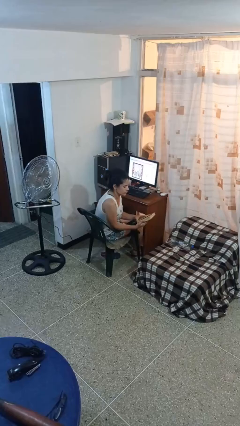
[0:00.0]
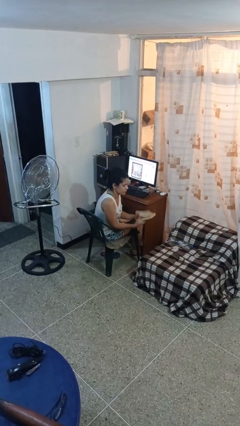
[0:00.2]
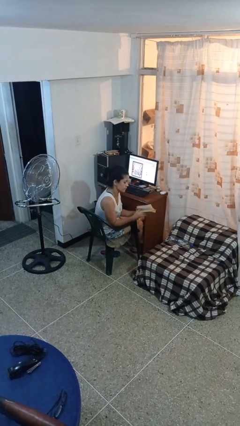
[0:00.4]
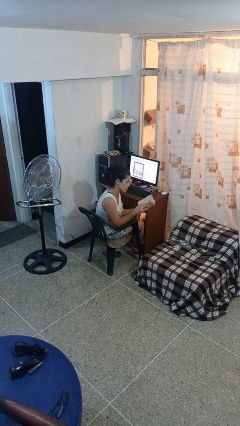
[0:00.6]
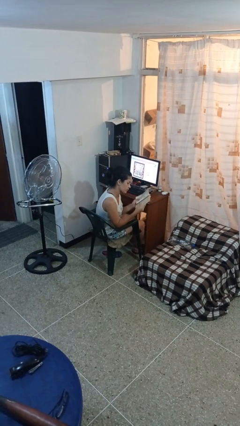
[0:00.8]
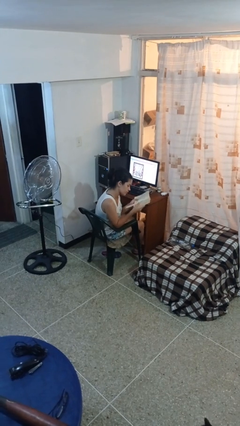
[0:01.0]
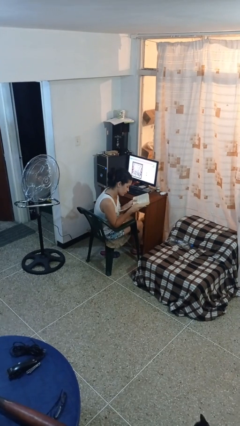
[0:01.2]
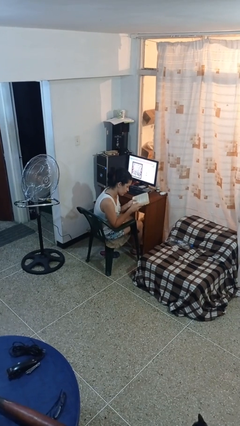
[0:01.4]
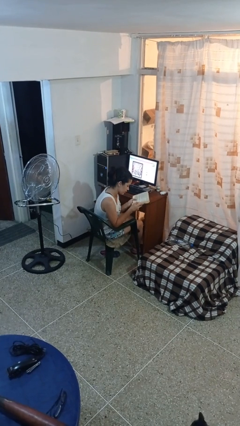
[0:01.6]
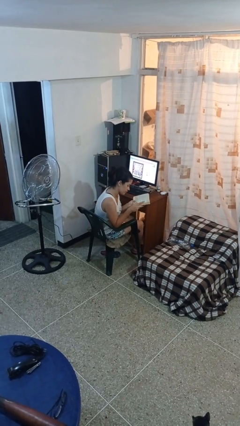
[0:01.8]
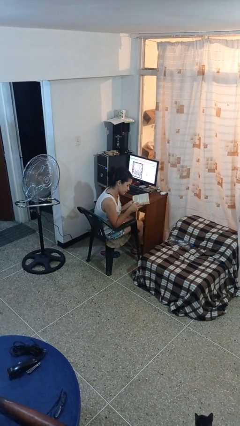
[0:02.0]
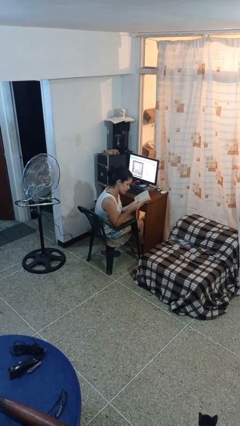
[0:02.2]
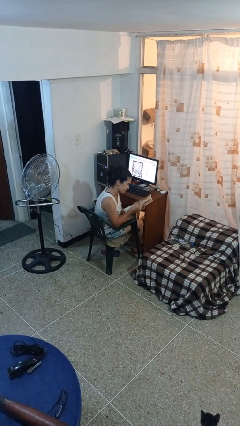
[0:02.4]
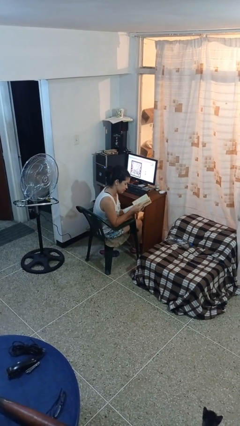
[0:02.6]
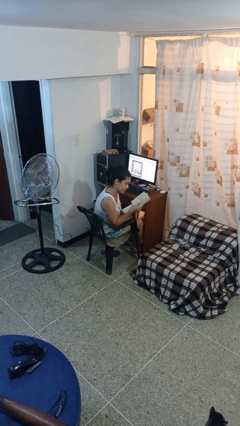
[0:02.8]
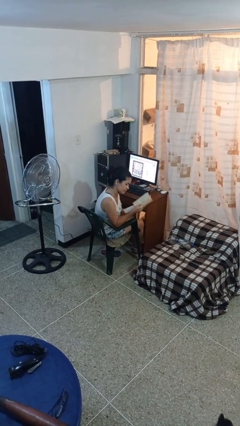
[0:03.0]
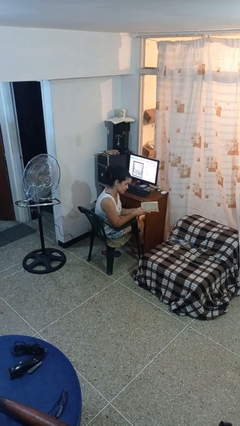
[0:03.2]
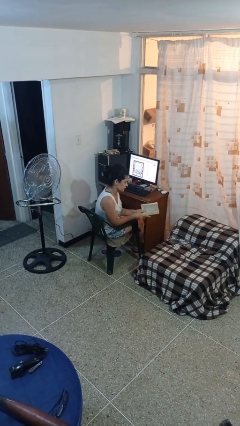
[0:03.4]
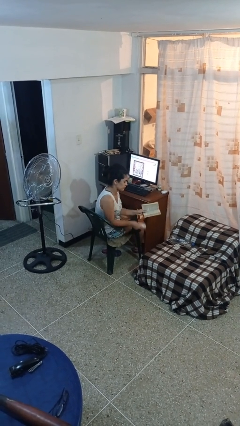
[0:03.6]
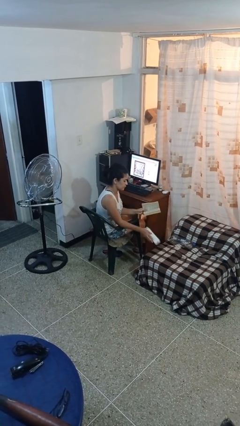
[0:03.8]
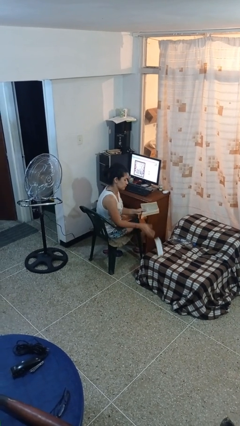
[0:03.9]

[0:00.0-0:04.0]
person reads book

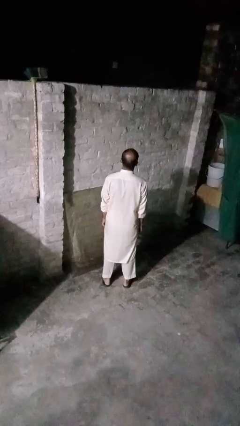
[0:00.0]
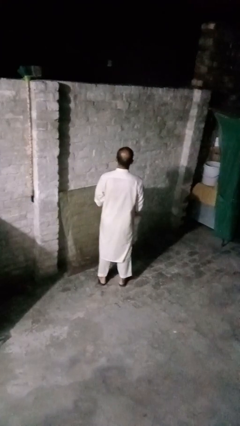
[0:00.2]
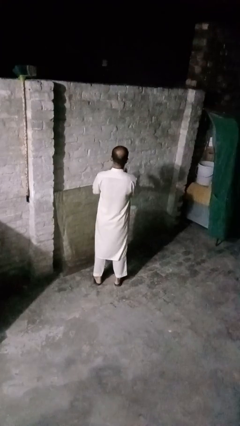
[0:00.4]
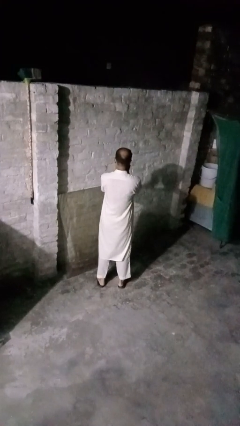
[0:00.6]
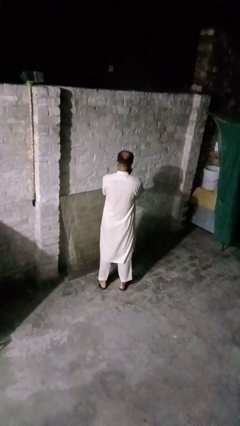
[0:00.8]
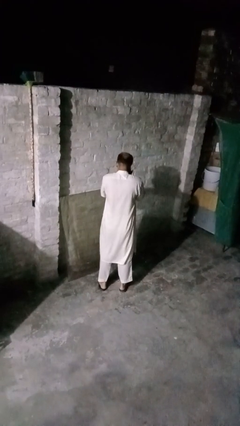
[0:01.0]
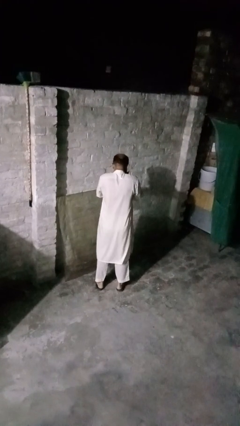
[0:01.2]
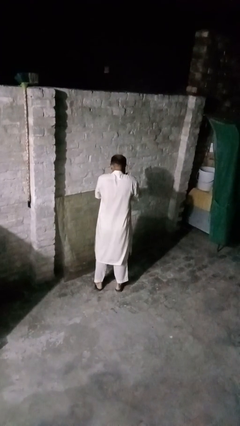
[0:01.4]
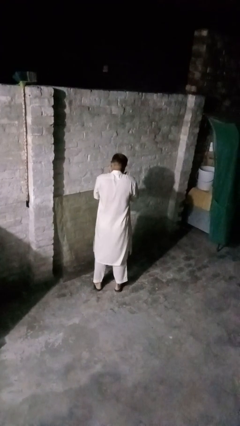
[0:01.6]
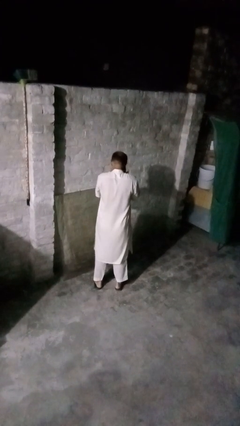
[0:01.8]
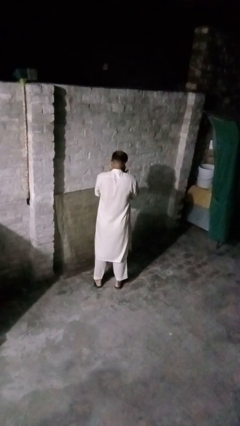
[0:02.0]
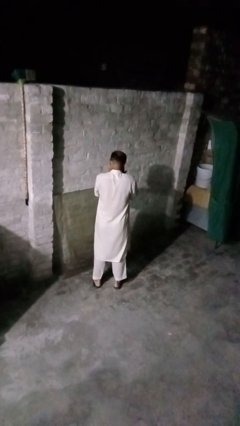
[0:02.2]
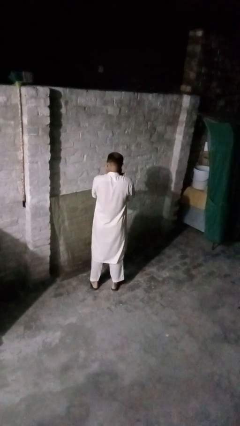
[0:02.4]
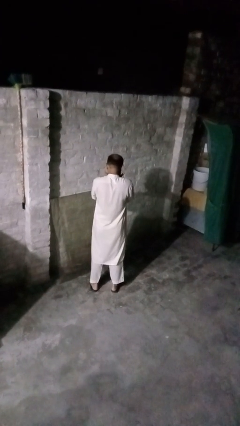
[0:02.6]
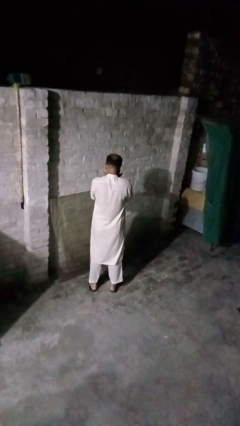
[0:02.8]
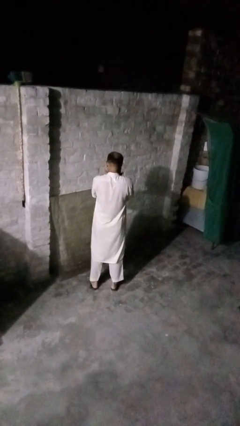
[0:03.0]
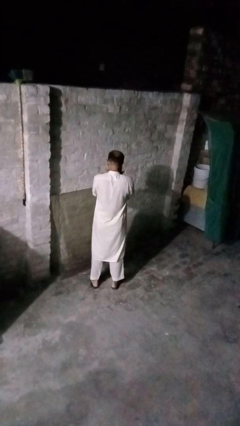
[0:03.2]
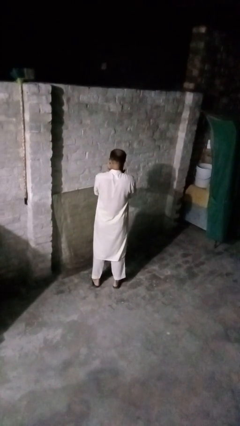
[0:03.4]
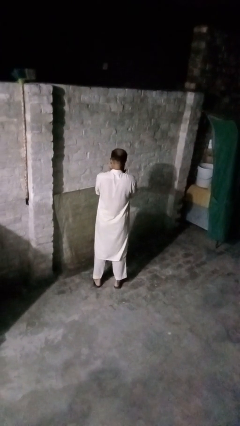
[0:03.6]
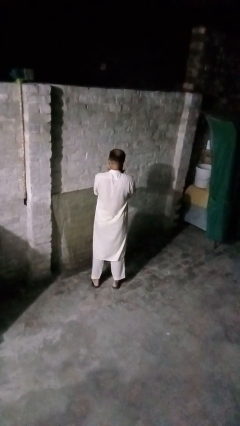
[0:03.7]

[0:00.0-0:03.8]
person sneezes into hand

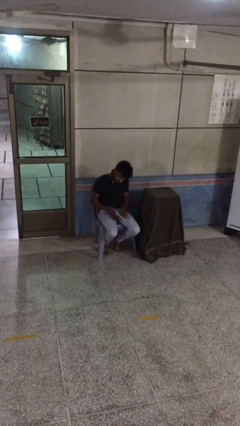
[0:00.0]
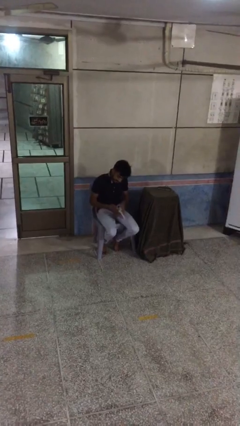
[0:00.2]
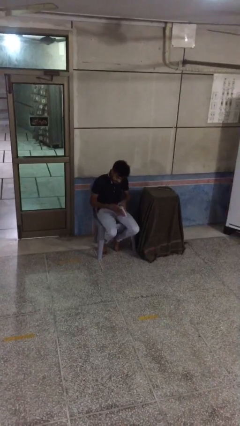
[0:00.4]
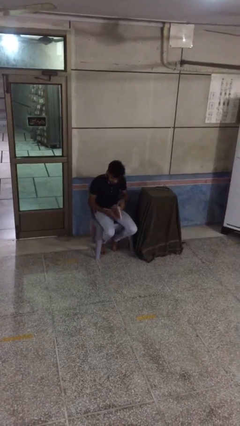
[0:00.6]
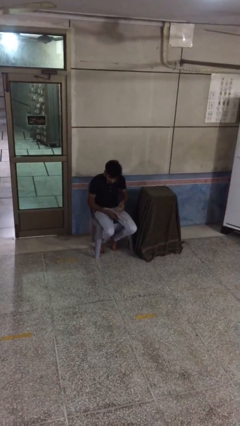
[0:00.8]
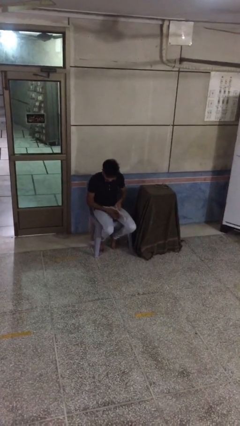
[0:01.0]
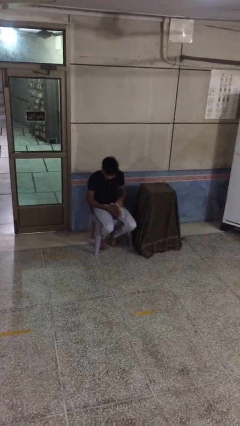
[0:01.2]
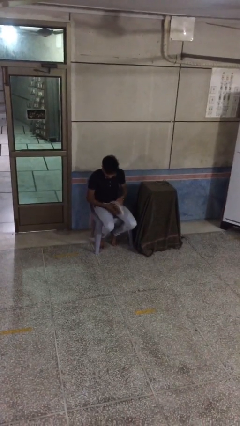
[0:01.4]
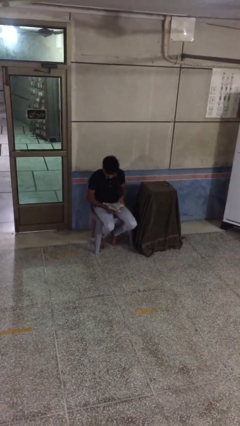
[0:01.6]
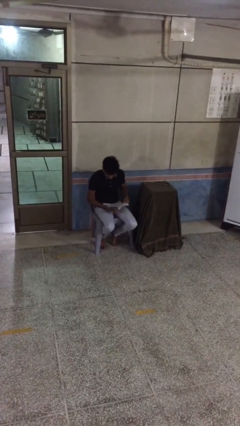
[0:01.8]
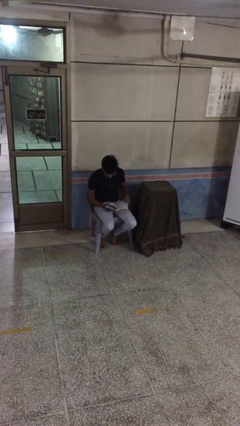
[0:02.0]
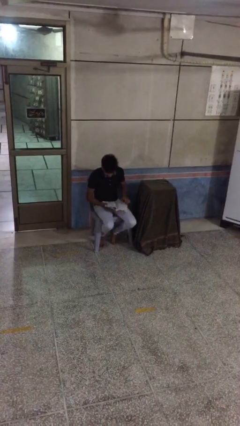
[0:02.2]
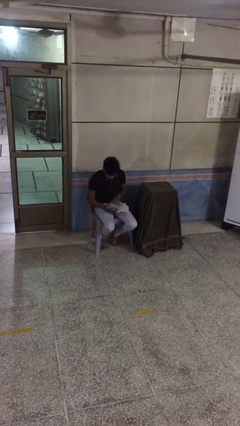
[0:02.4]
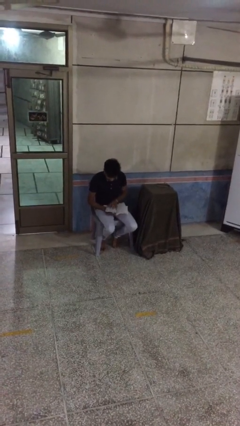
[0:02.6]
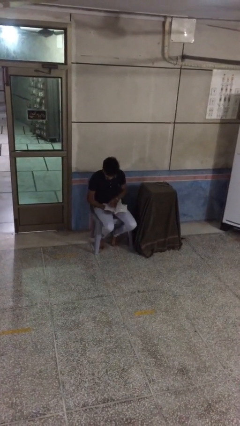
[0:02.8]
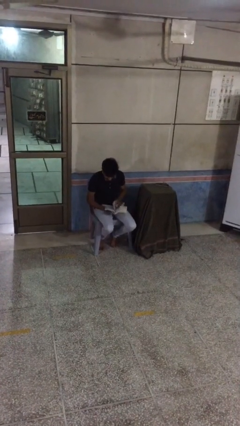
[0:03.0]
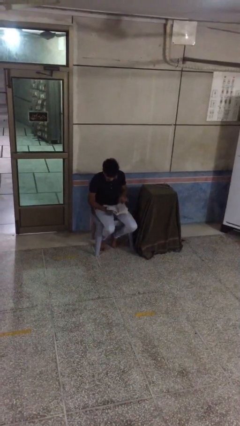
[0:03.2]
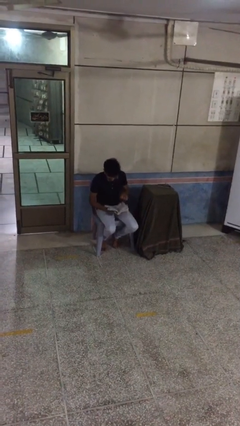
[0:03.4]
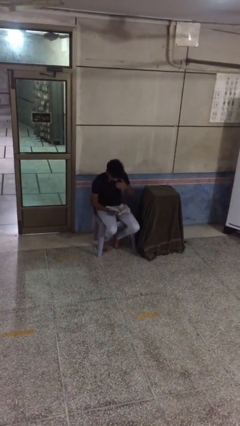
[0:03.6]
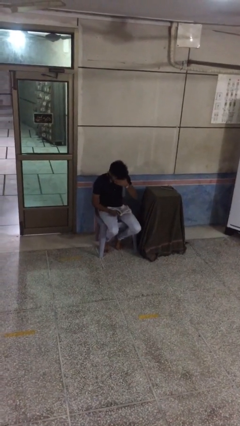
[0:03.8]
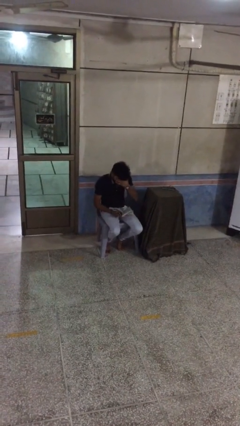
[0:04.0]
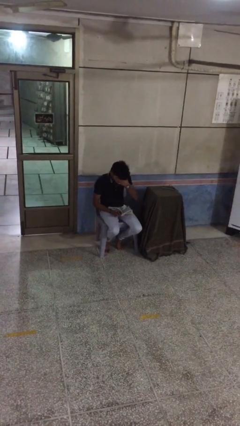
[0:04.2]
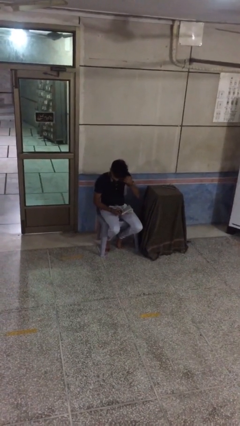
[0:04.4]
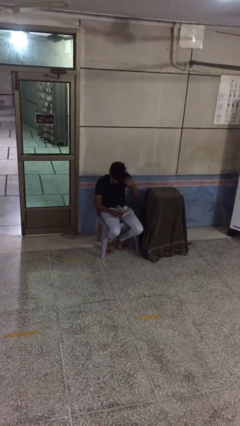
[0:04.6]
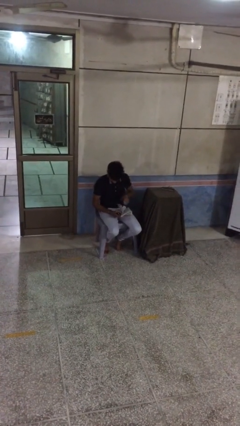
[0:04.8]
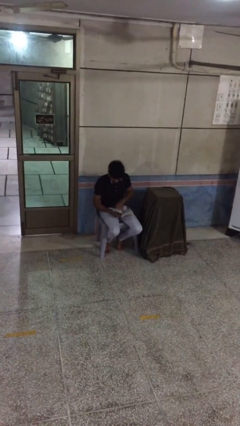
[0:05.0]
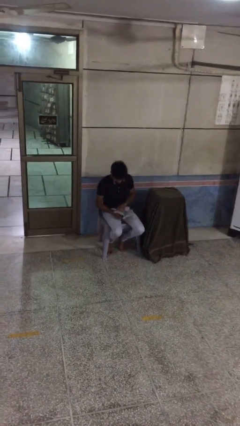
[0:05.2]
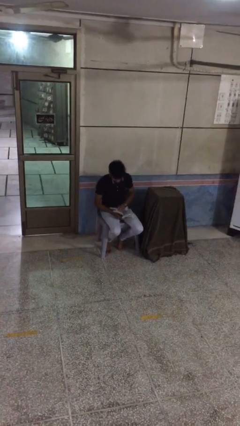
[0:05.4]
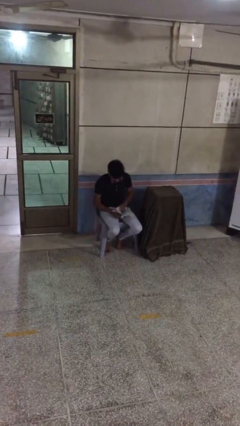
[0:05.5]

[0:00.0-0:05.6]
person reads document

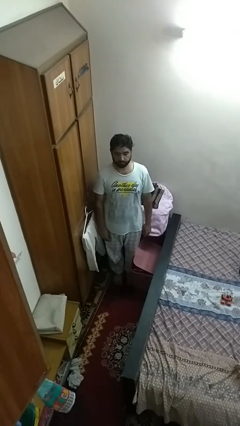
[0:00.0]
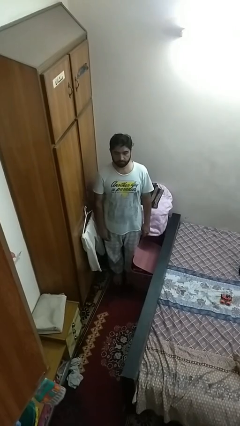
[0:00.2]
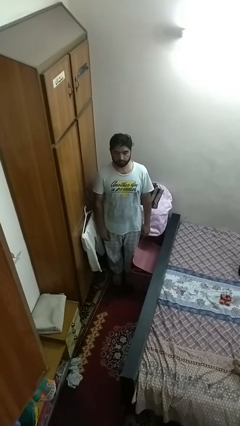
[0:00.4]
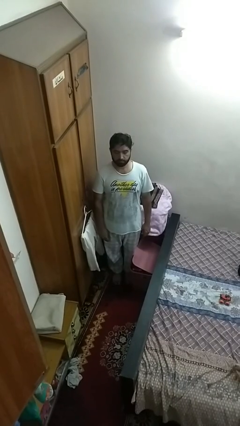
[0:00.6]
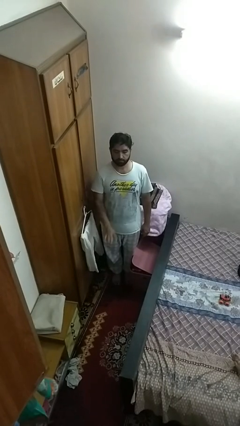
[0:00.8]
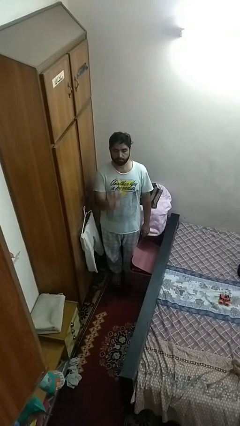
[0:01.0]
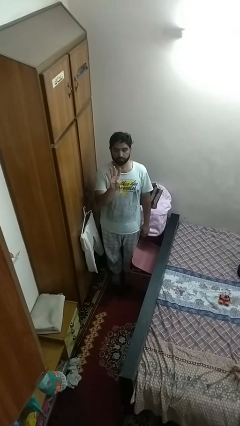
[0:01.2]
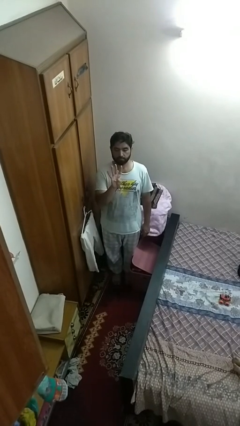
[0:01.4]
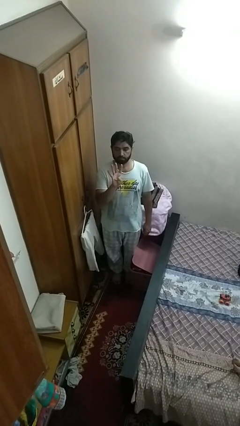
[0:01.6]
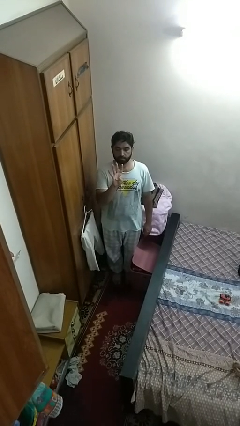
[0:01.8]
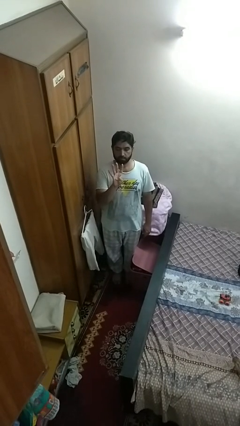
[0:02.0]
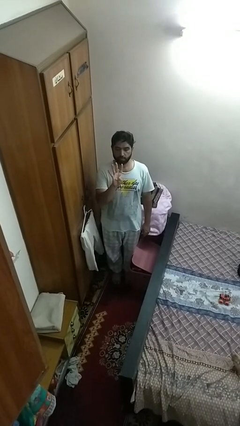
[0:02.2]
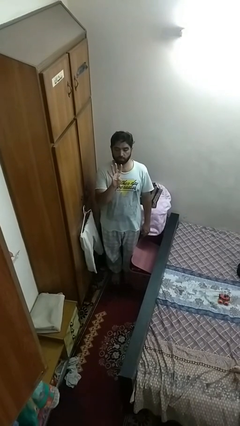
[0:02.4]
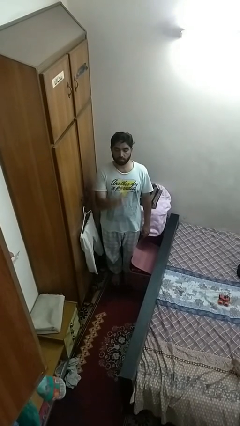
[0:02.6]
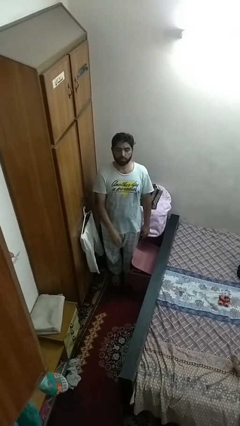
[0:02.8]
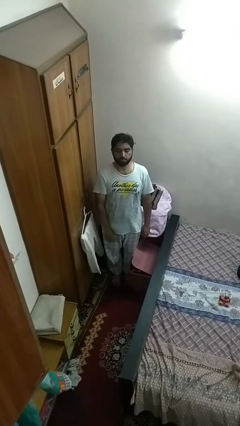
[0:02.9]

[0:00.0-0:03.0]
person gestures number four

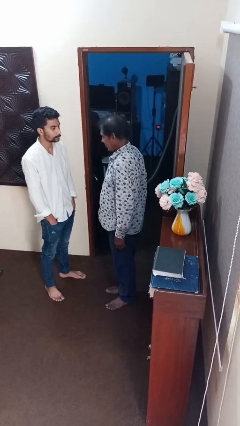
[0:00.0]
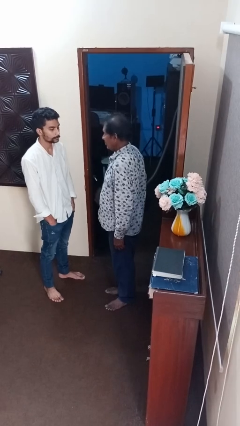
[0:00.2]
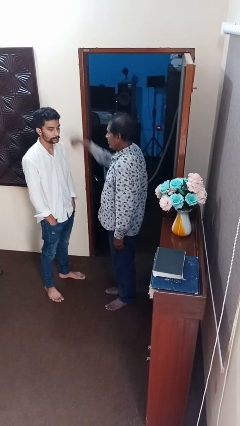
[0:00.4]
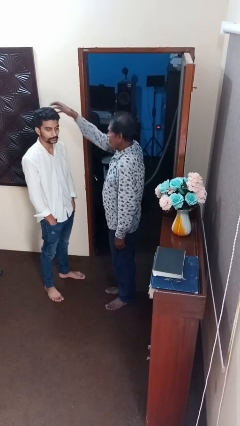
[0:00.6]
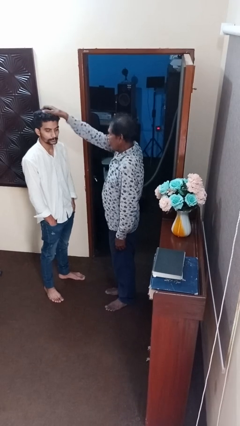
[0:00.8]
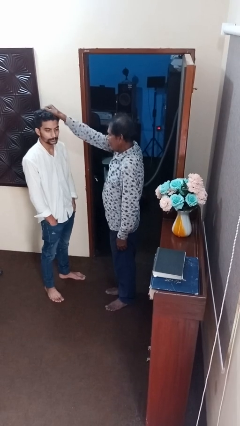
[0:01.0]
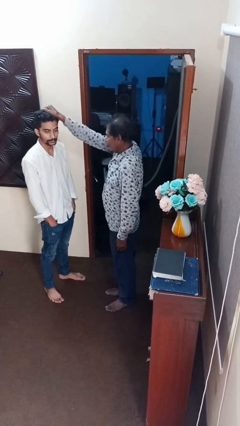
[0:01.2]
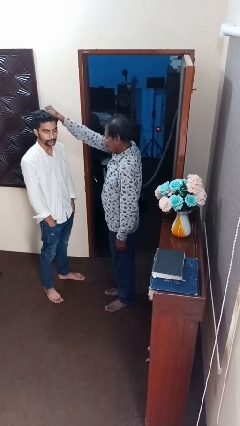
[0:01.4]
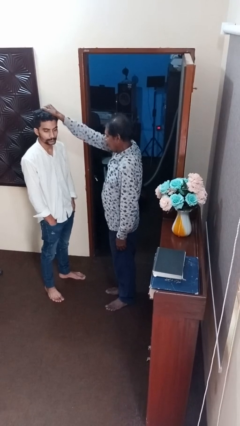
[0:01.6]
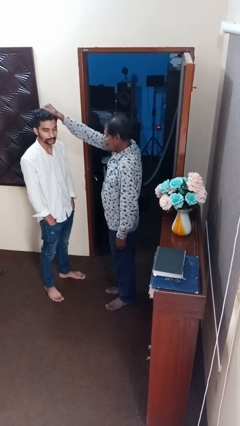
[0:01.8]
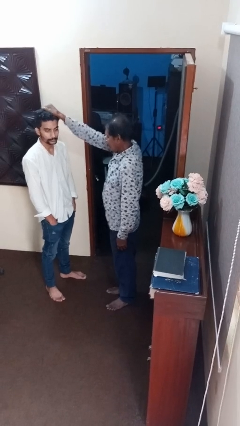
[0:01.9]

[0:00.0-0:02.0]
person grabs person by hair
